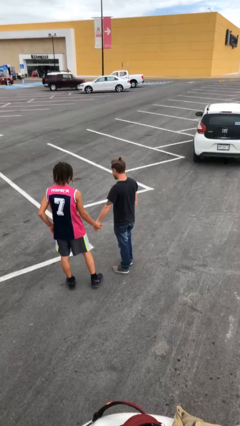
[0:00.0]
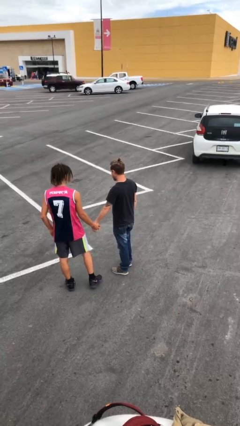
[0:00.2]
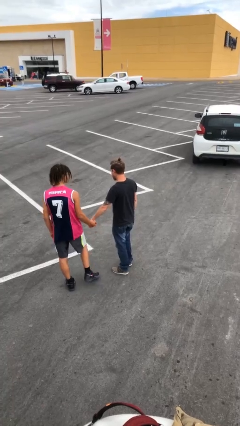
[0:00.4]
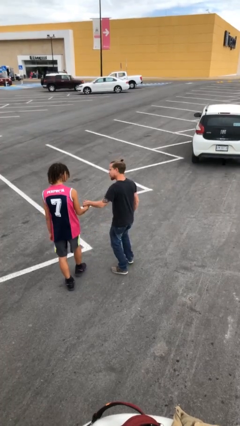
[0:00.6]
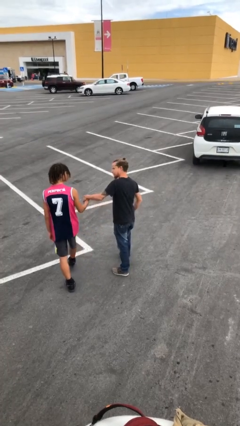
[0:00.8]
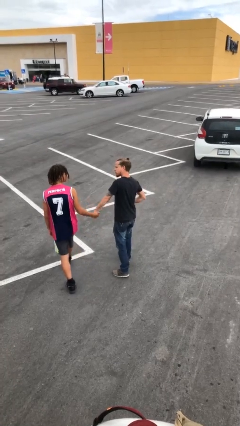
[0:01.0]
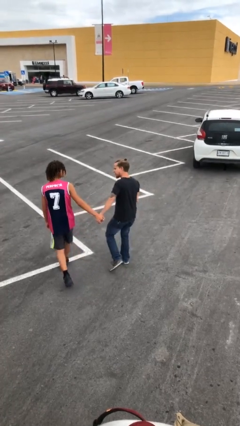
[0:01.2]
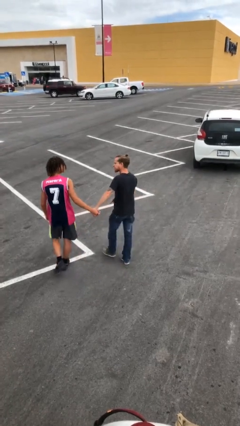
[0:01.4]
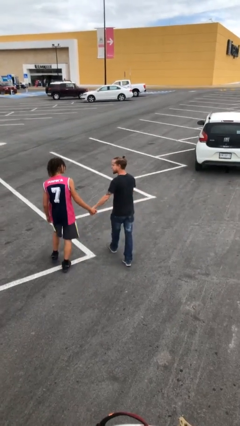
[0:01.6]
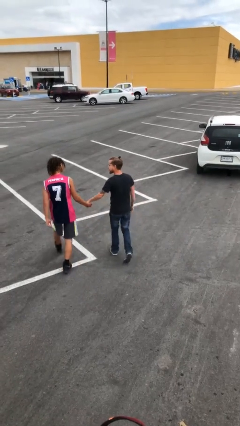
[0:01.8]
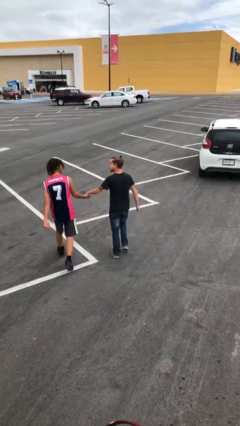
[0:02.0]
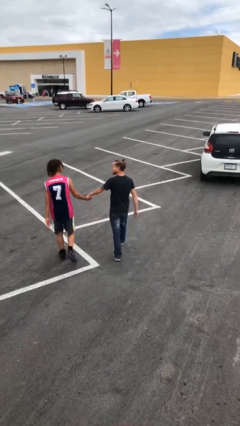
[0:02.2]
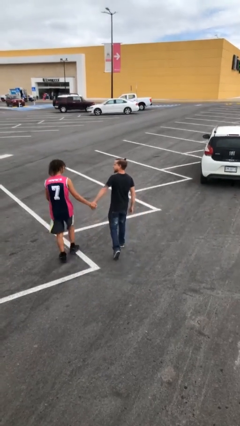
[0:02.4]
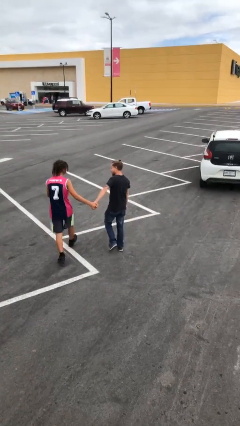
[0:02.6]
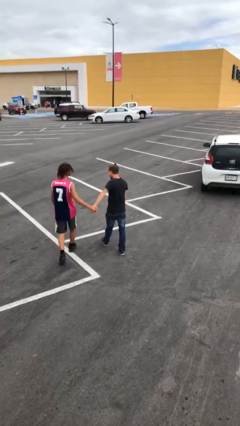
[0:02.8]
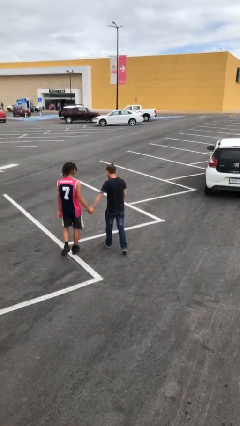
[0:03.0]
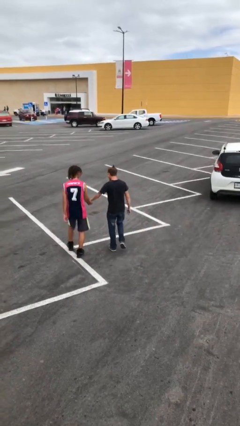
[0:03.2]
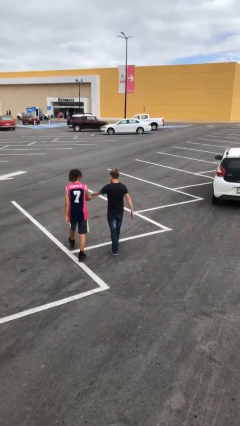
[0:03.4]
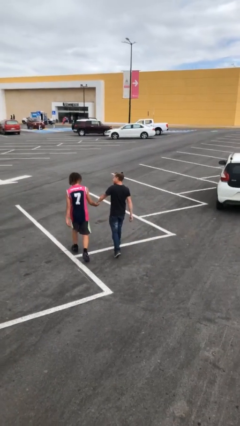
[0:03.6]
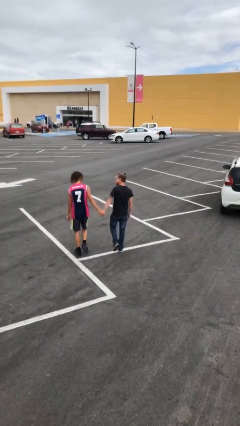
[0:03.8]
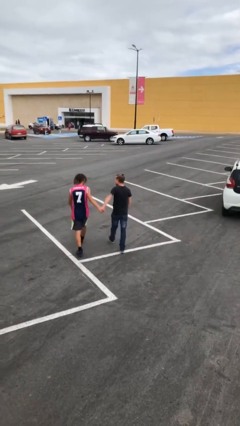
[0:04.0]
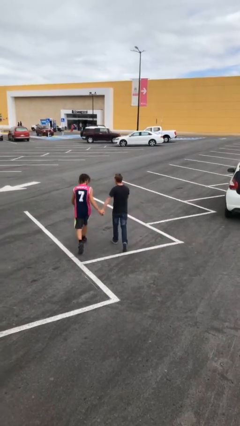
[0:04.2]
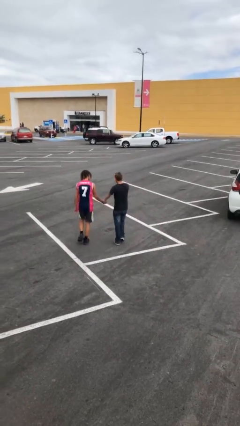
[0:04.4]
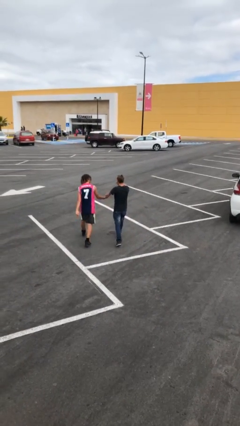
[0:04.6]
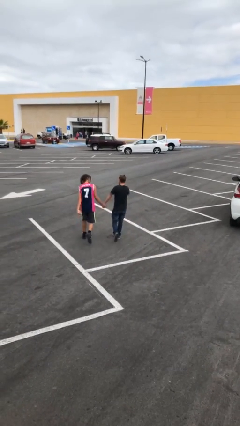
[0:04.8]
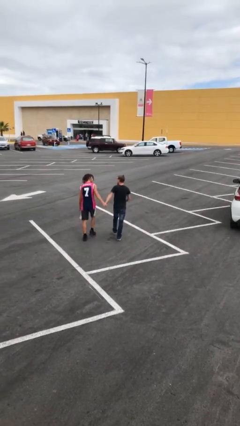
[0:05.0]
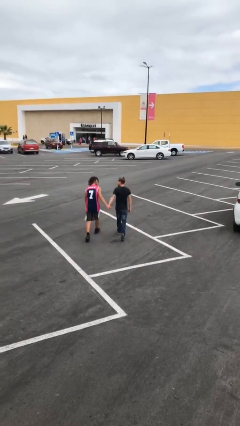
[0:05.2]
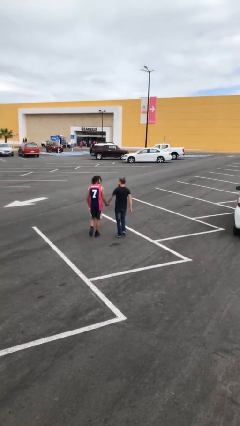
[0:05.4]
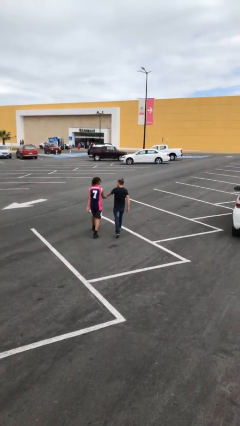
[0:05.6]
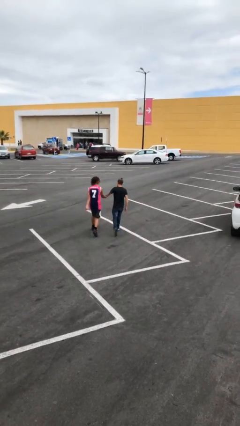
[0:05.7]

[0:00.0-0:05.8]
person holds hand

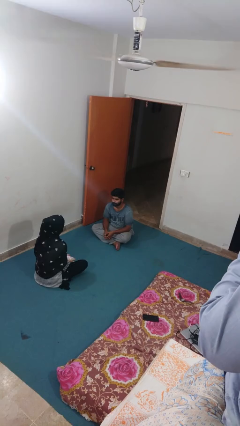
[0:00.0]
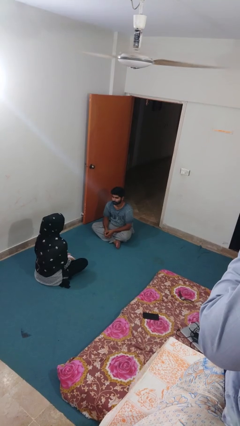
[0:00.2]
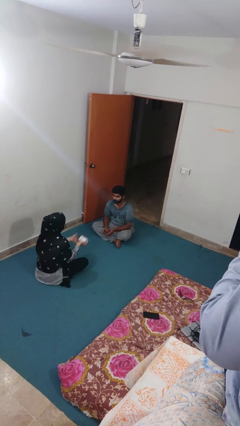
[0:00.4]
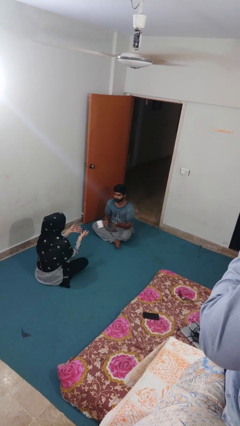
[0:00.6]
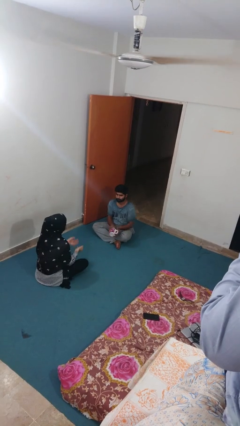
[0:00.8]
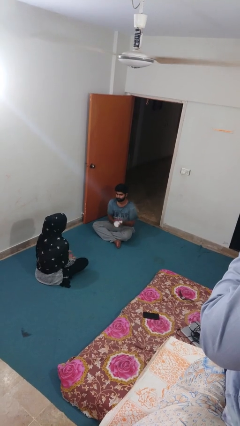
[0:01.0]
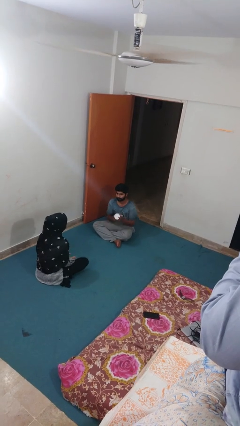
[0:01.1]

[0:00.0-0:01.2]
person catches object from person

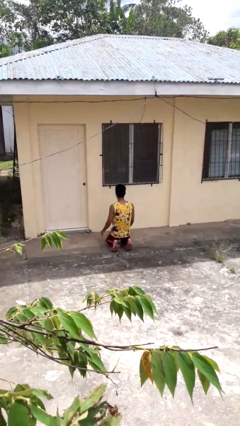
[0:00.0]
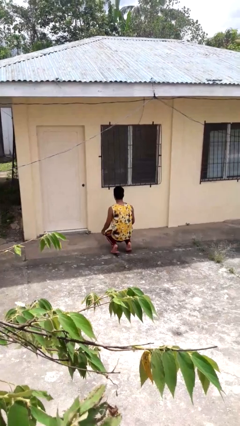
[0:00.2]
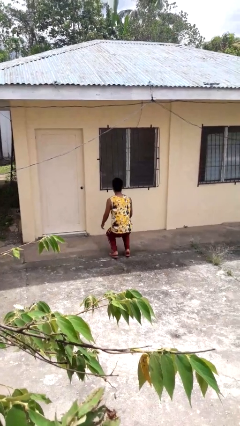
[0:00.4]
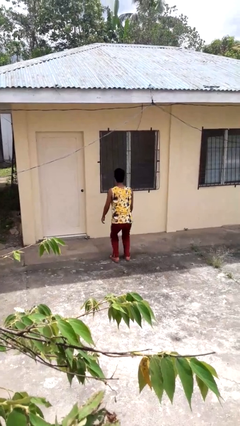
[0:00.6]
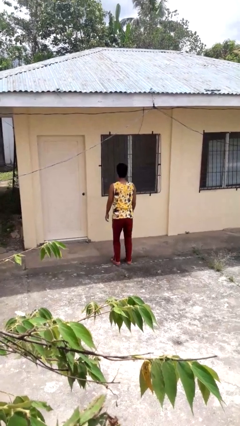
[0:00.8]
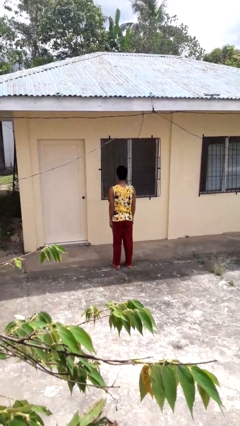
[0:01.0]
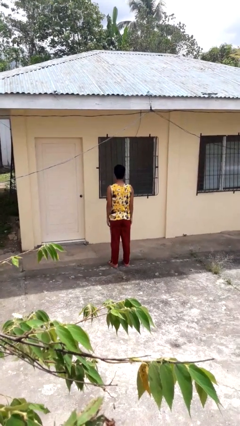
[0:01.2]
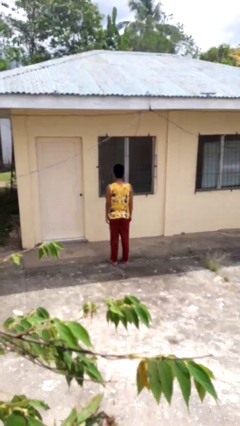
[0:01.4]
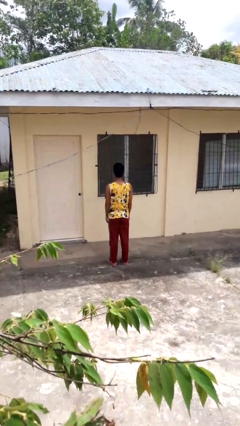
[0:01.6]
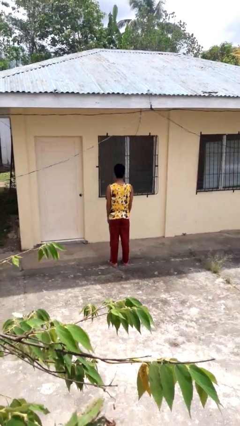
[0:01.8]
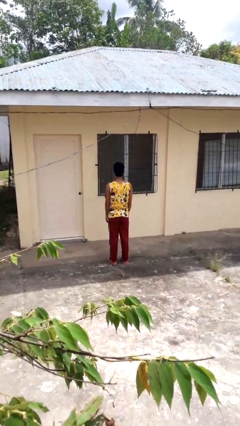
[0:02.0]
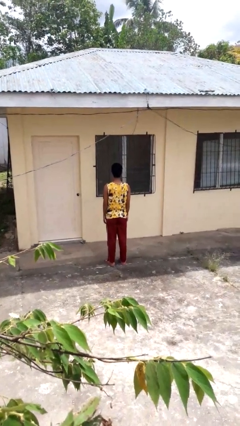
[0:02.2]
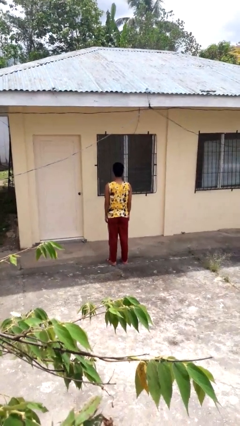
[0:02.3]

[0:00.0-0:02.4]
person stands up from floor

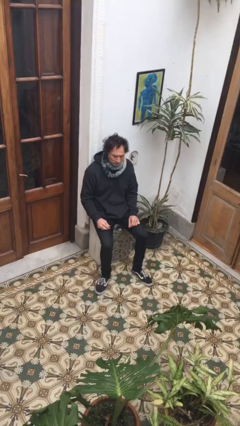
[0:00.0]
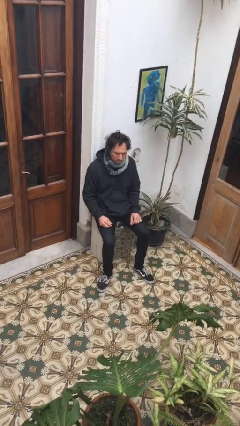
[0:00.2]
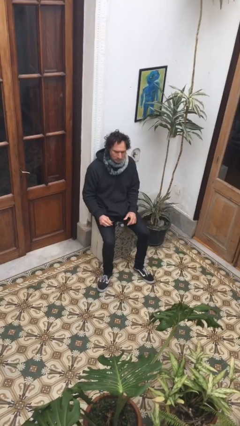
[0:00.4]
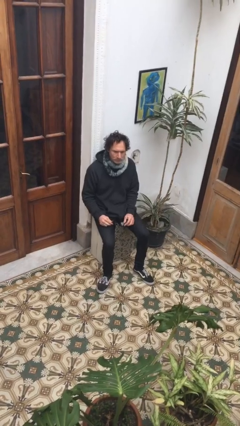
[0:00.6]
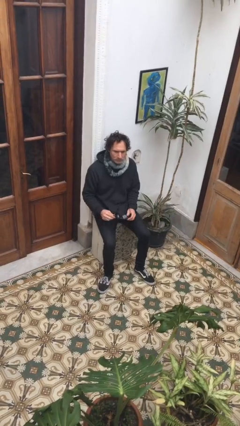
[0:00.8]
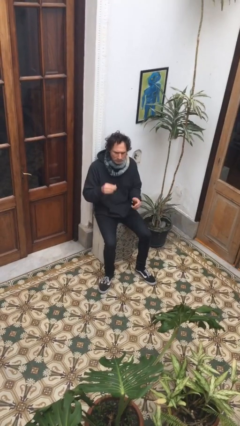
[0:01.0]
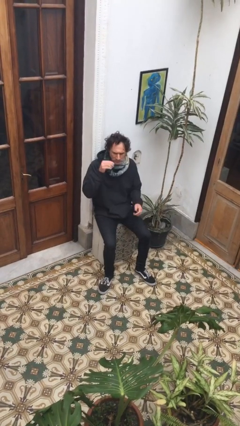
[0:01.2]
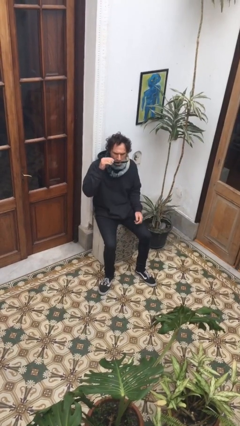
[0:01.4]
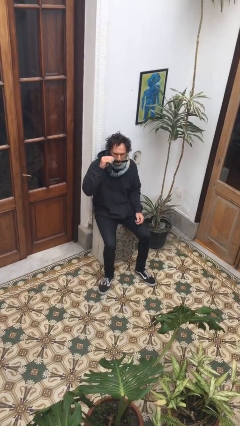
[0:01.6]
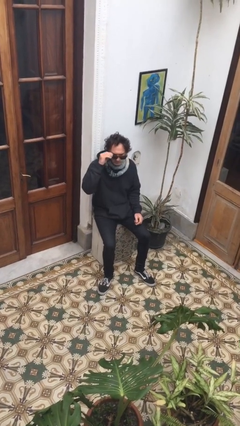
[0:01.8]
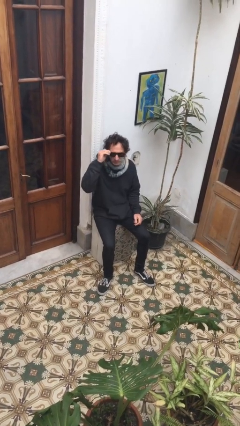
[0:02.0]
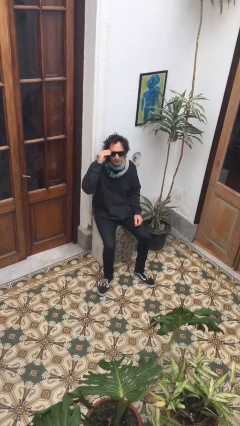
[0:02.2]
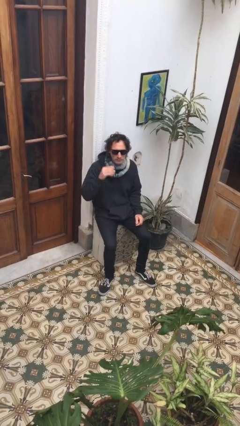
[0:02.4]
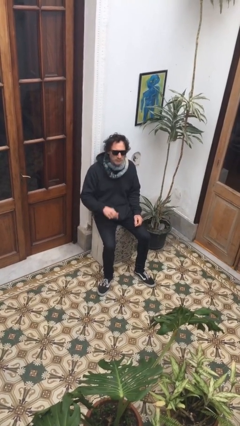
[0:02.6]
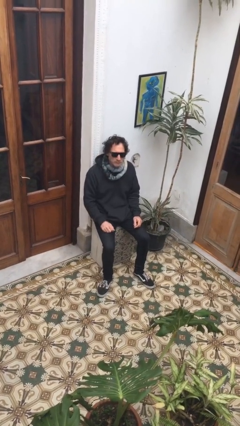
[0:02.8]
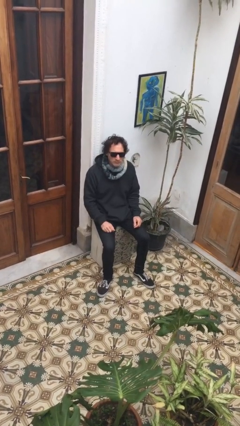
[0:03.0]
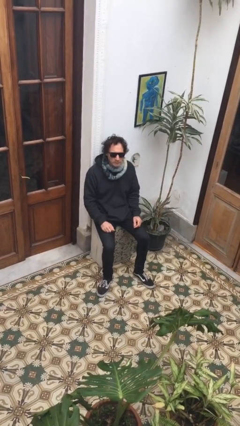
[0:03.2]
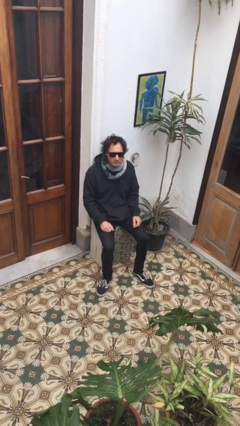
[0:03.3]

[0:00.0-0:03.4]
person puts on sunglasses

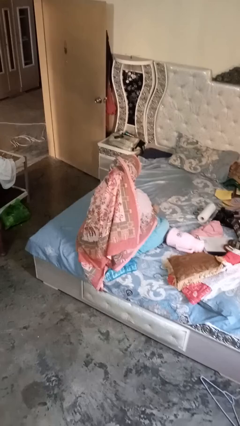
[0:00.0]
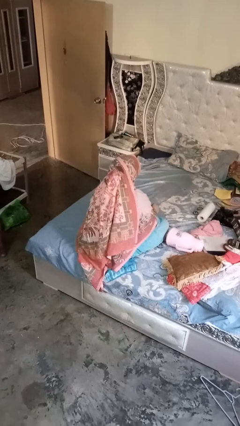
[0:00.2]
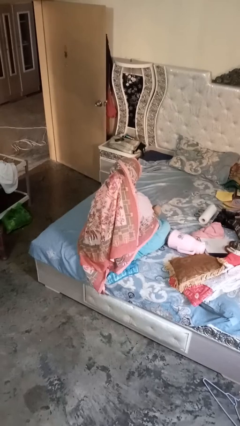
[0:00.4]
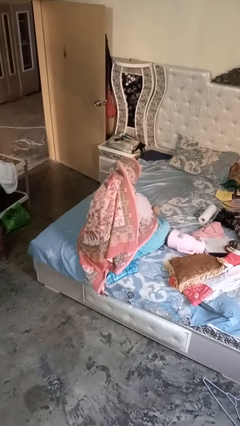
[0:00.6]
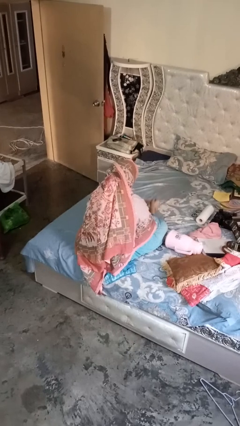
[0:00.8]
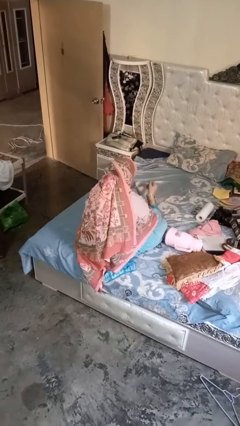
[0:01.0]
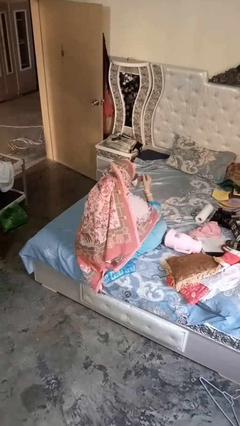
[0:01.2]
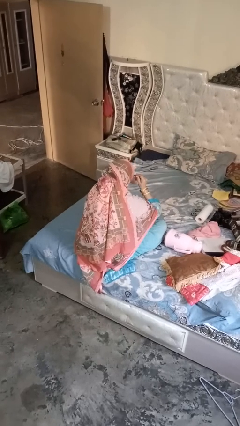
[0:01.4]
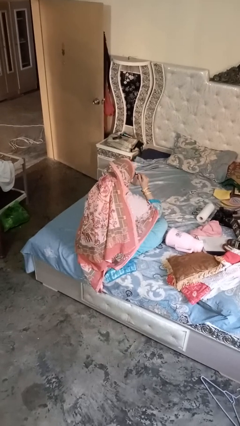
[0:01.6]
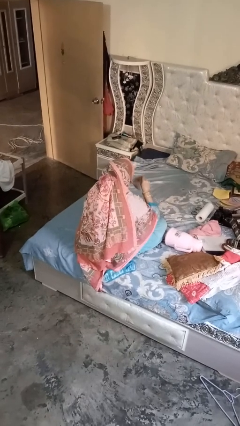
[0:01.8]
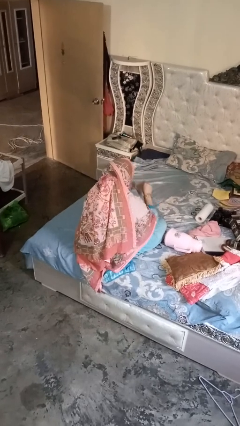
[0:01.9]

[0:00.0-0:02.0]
person drinks from mug

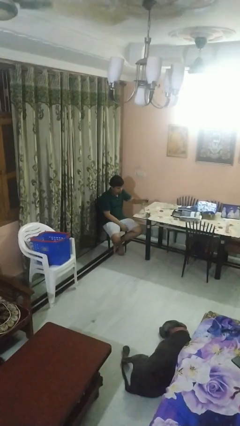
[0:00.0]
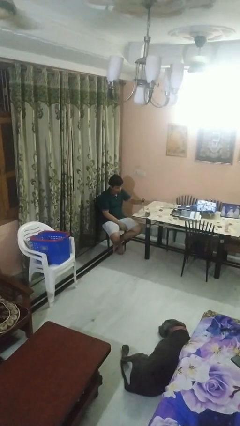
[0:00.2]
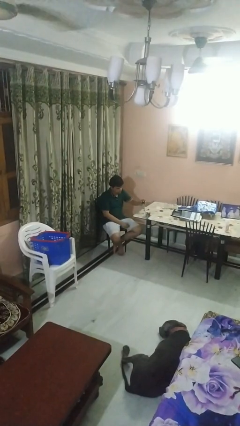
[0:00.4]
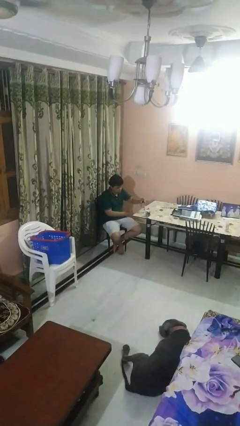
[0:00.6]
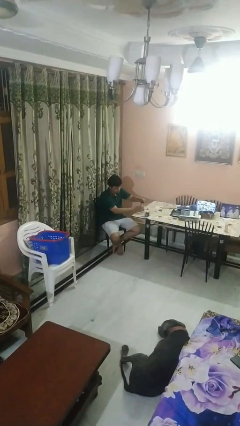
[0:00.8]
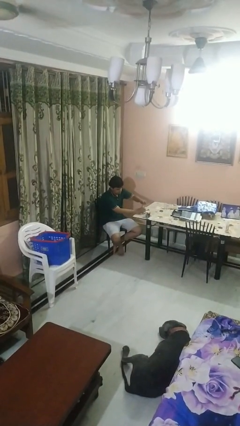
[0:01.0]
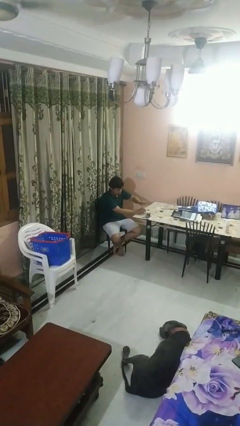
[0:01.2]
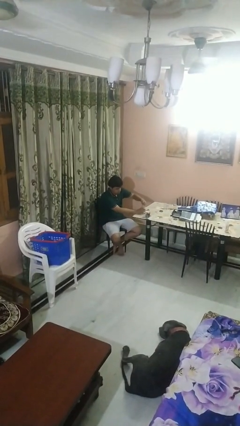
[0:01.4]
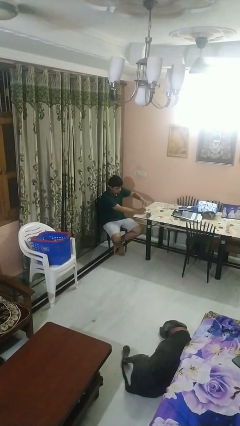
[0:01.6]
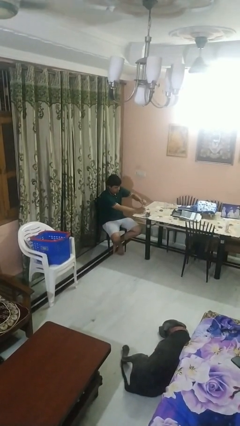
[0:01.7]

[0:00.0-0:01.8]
person screws lid to bottle

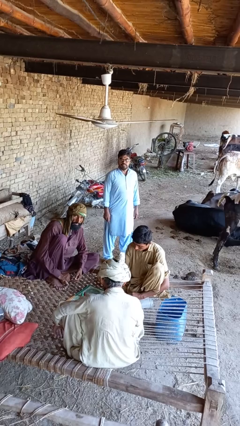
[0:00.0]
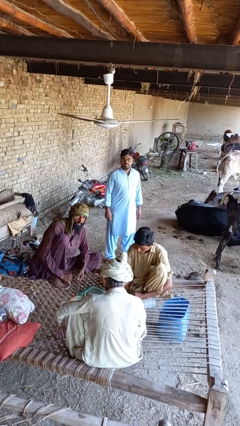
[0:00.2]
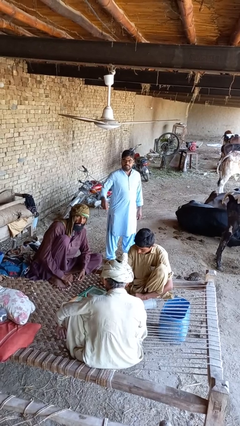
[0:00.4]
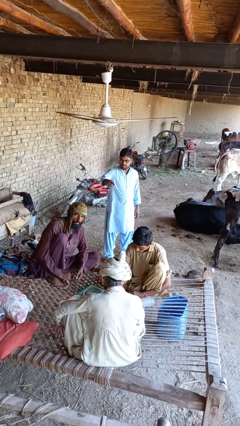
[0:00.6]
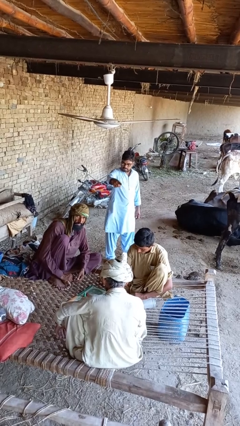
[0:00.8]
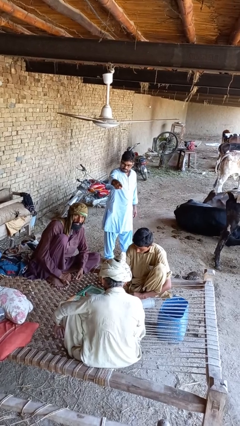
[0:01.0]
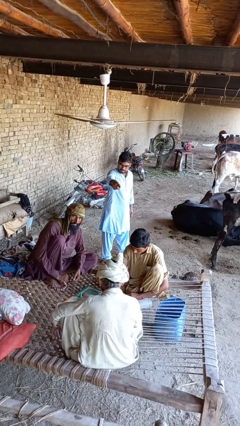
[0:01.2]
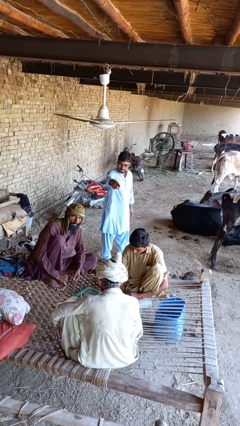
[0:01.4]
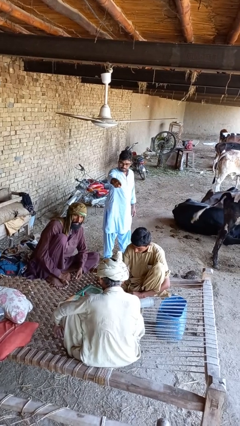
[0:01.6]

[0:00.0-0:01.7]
person points at person
